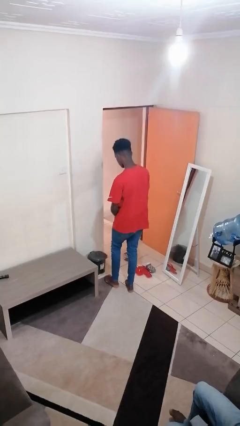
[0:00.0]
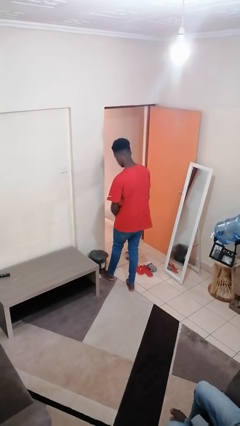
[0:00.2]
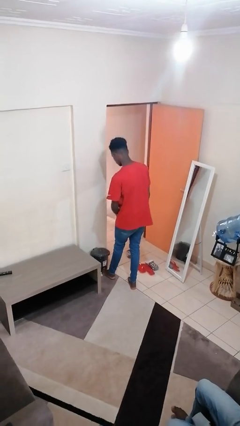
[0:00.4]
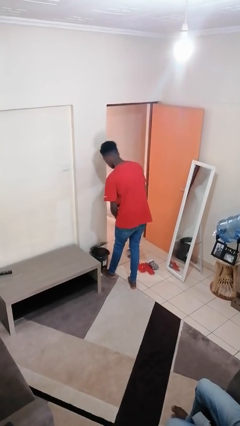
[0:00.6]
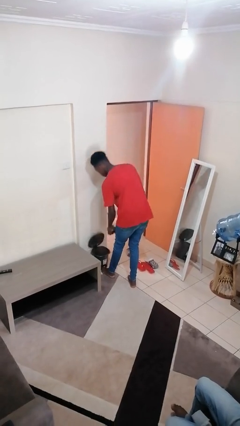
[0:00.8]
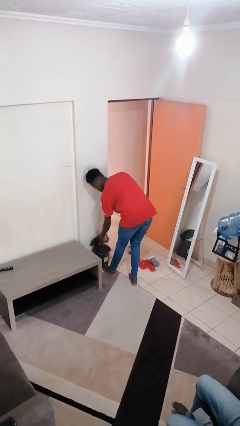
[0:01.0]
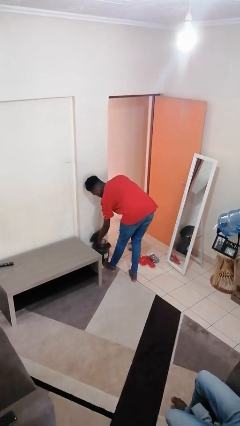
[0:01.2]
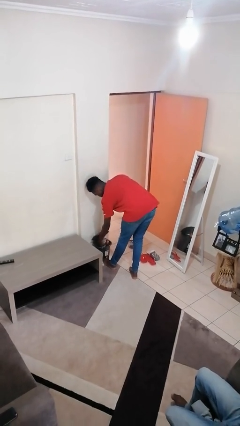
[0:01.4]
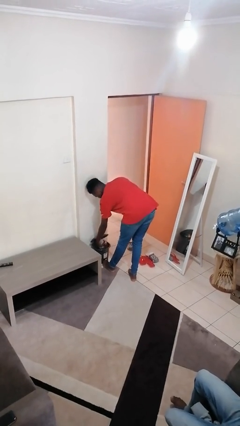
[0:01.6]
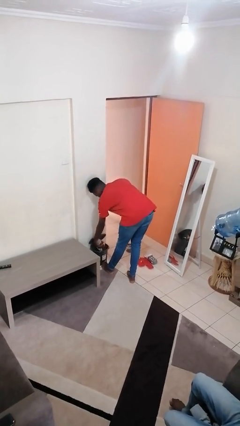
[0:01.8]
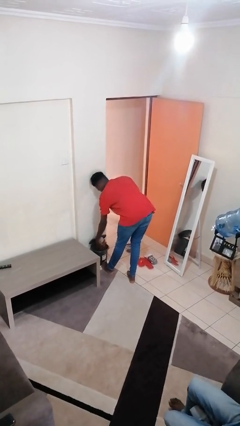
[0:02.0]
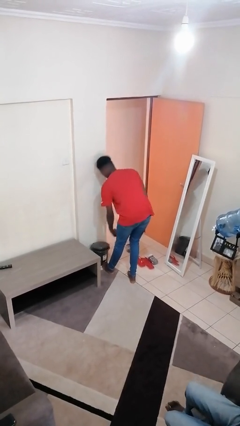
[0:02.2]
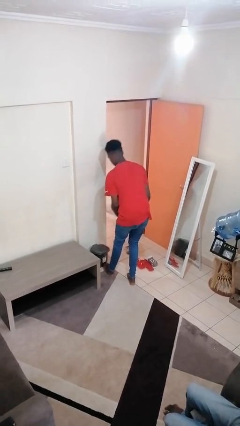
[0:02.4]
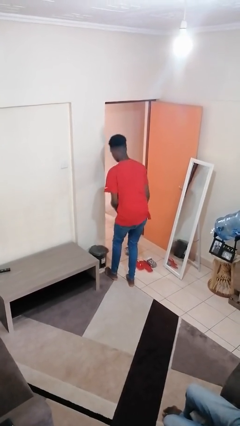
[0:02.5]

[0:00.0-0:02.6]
person discards trash

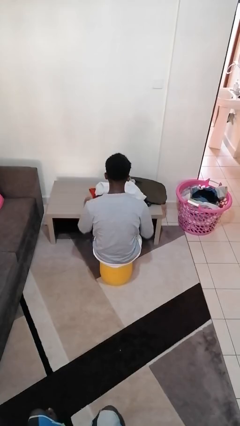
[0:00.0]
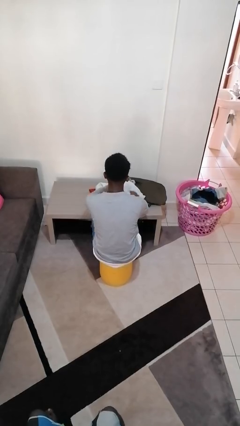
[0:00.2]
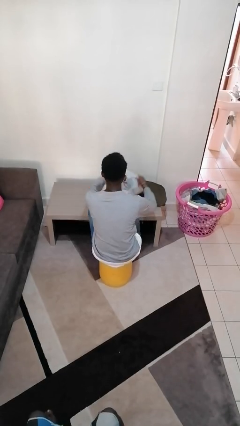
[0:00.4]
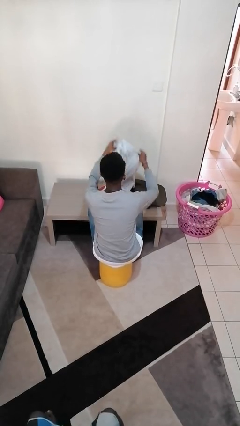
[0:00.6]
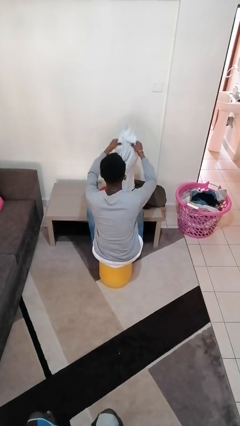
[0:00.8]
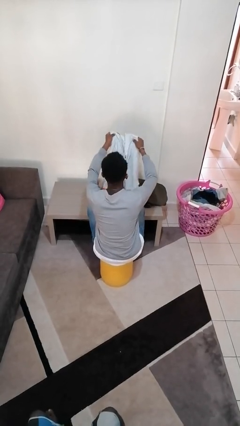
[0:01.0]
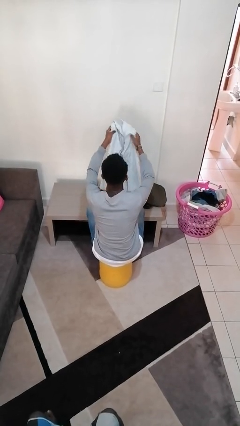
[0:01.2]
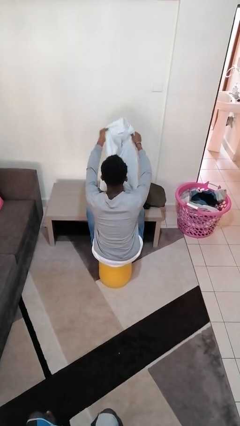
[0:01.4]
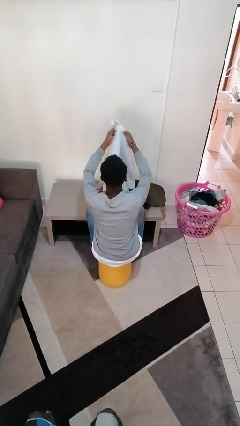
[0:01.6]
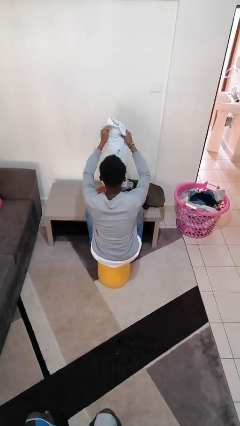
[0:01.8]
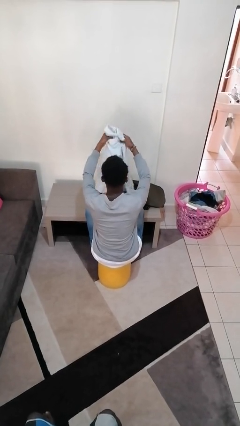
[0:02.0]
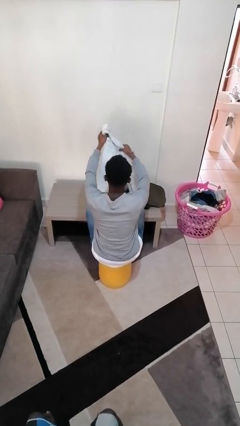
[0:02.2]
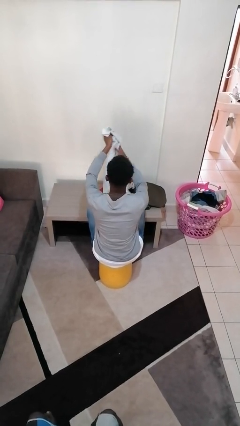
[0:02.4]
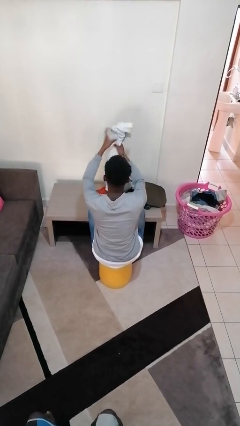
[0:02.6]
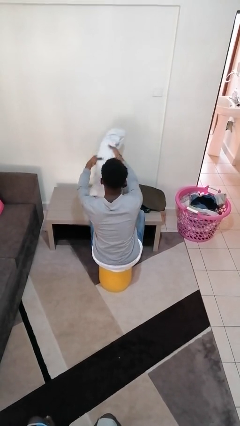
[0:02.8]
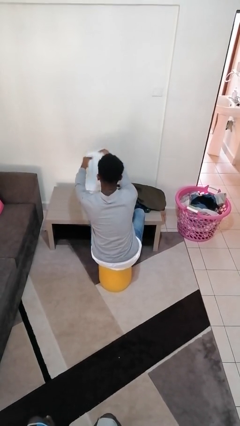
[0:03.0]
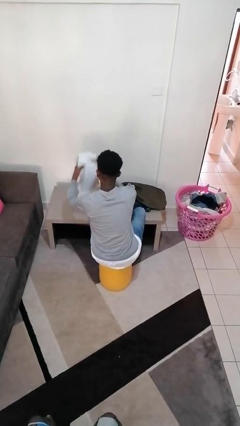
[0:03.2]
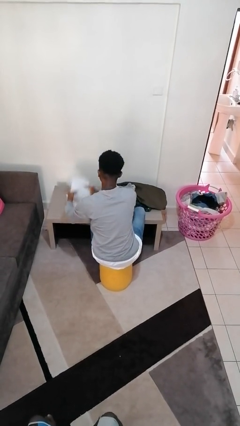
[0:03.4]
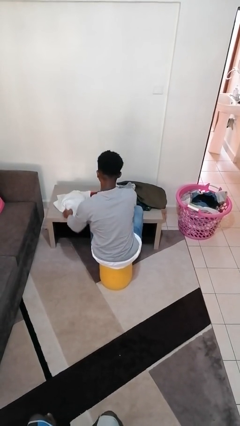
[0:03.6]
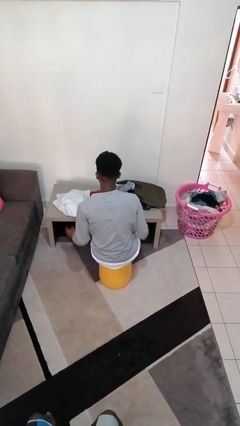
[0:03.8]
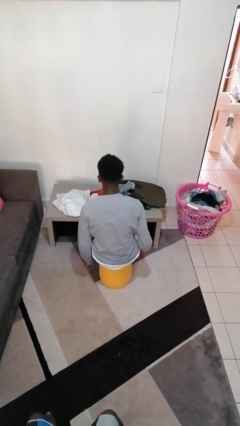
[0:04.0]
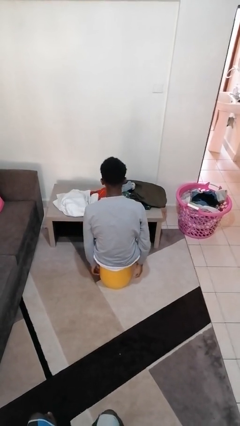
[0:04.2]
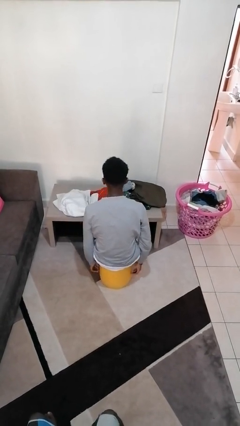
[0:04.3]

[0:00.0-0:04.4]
person folds shirt

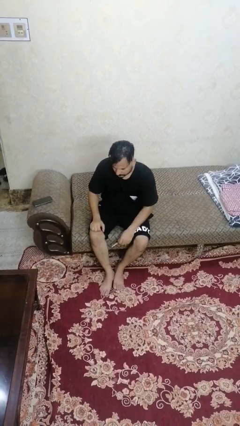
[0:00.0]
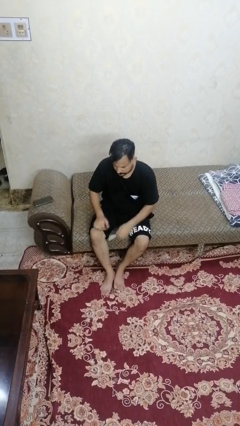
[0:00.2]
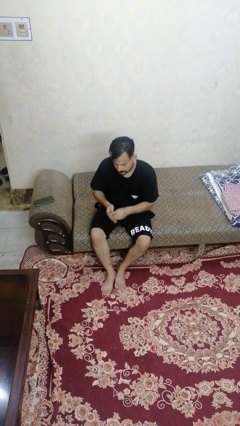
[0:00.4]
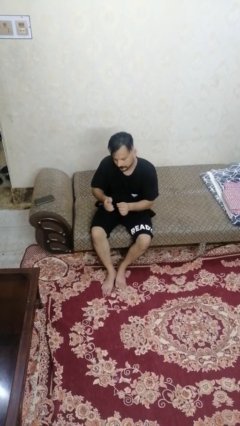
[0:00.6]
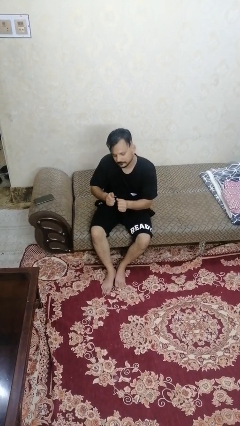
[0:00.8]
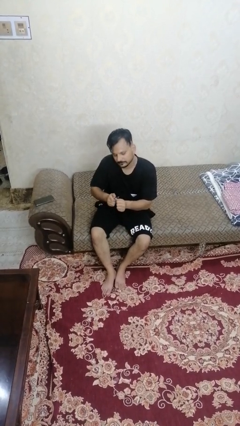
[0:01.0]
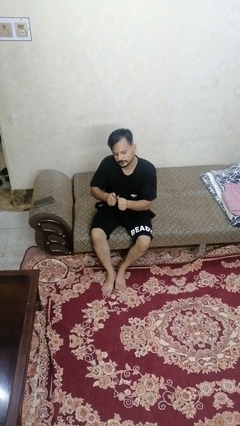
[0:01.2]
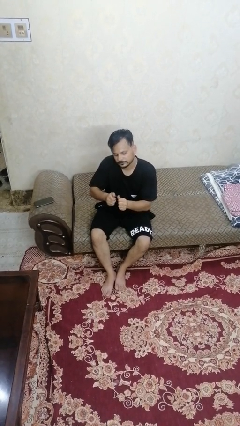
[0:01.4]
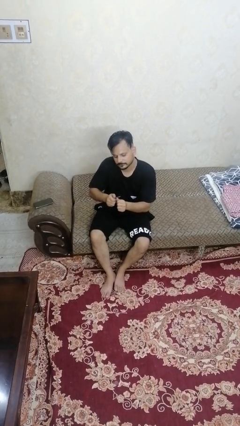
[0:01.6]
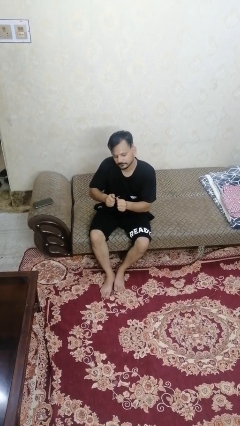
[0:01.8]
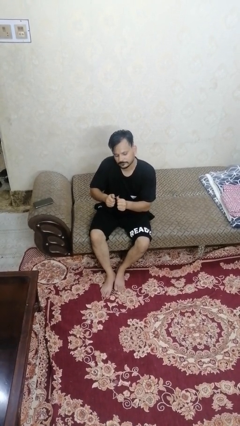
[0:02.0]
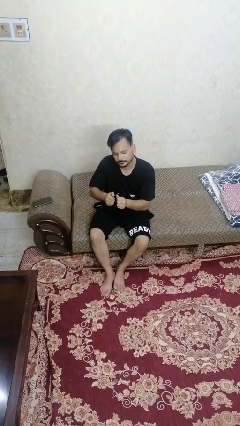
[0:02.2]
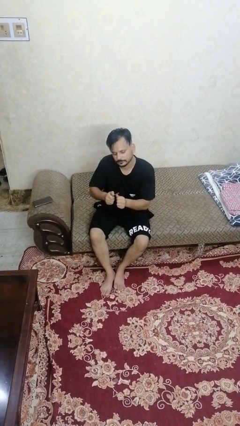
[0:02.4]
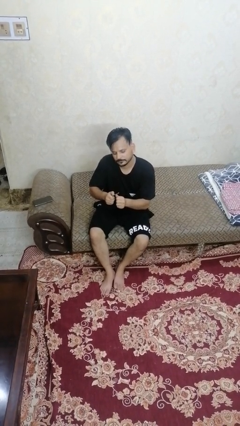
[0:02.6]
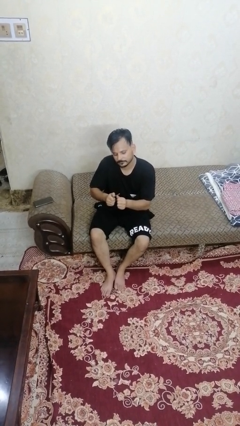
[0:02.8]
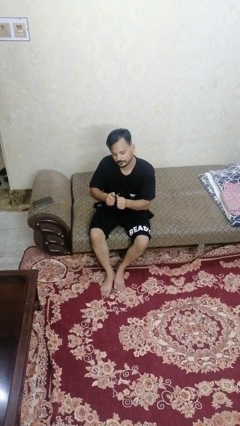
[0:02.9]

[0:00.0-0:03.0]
person files fingernails

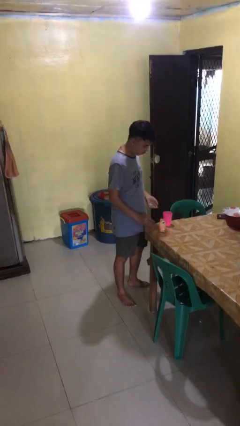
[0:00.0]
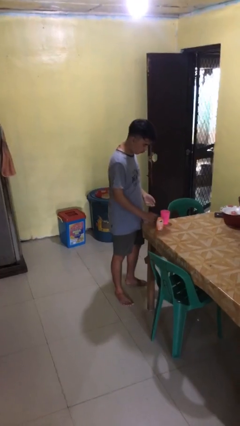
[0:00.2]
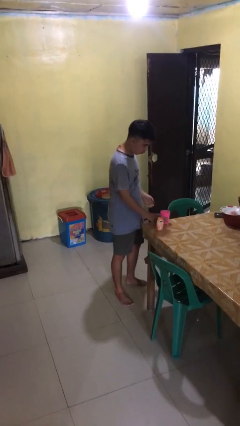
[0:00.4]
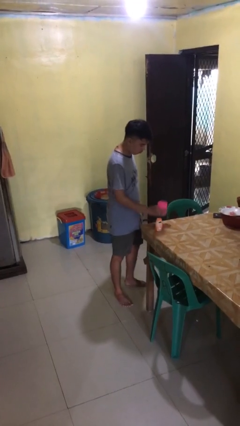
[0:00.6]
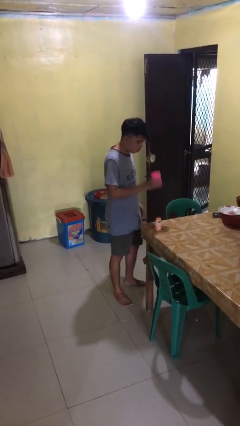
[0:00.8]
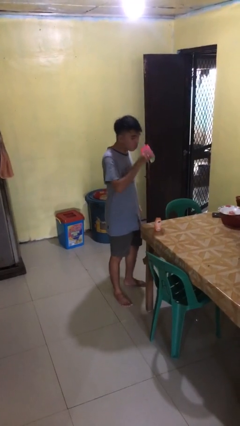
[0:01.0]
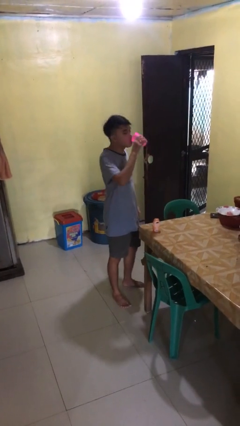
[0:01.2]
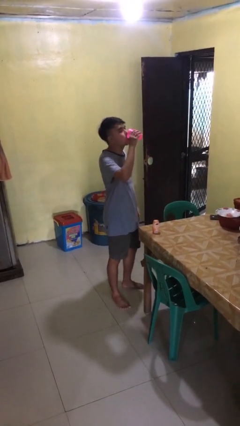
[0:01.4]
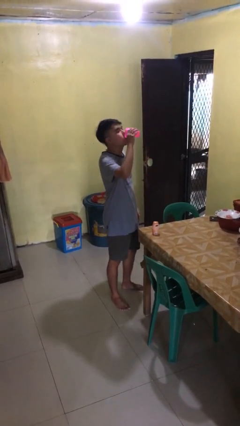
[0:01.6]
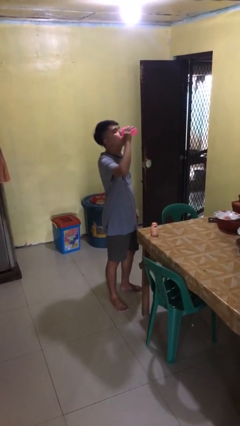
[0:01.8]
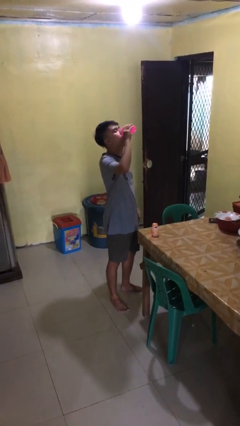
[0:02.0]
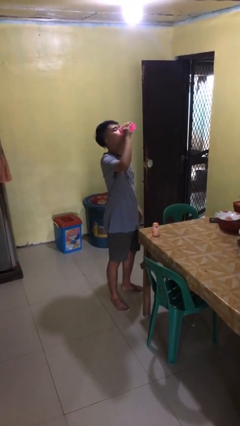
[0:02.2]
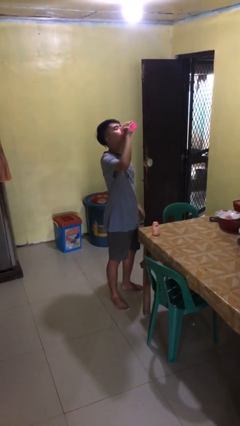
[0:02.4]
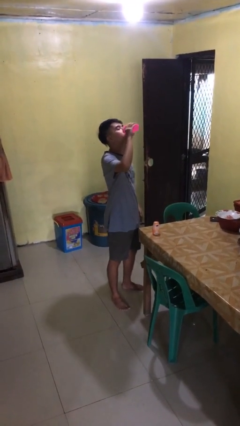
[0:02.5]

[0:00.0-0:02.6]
person drinks from cup

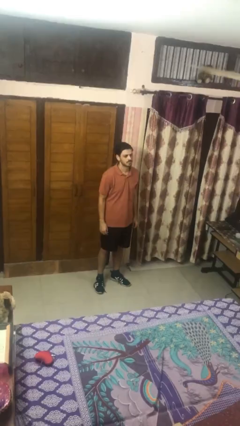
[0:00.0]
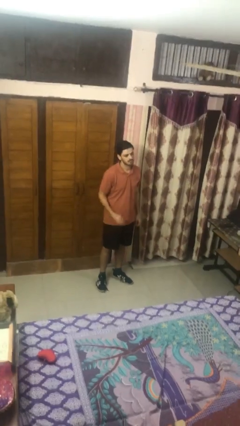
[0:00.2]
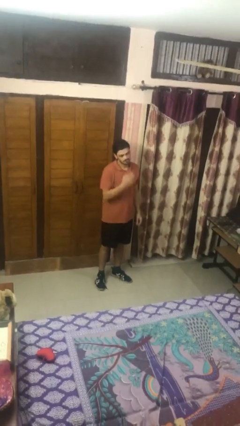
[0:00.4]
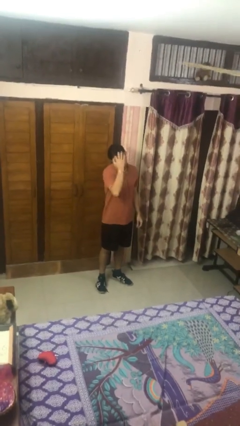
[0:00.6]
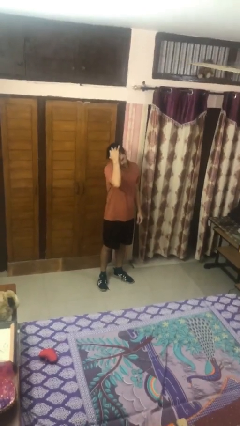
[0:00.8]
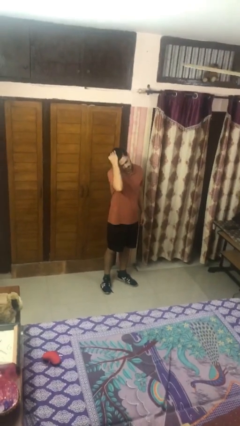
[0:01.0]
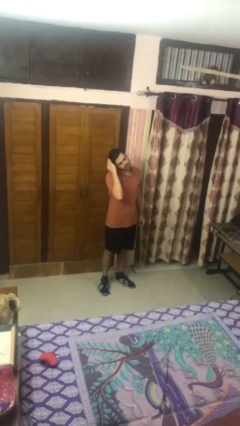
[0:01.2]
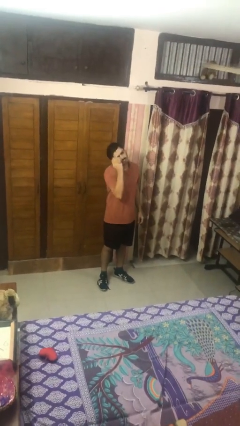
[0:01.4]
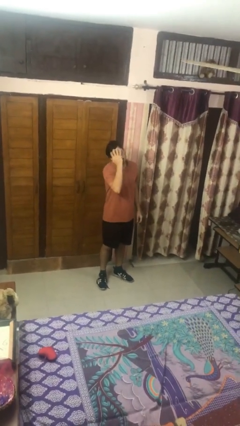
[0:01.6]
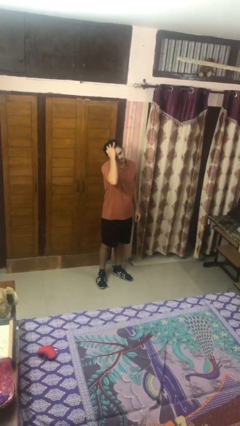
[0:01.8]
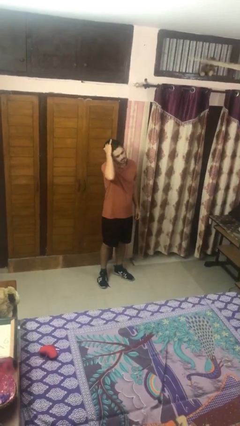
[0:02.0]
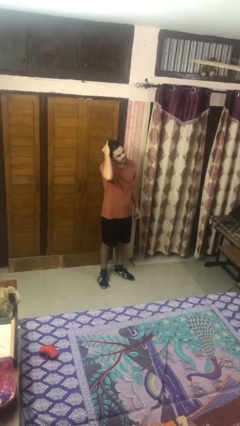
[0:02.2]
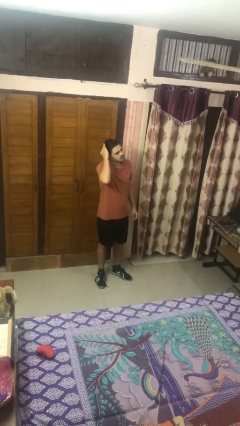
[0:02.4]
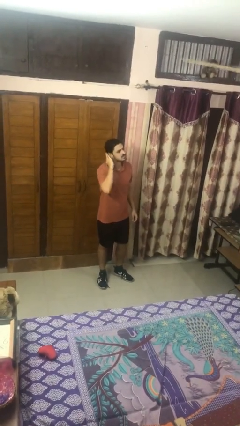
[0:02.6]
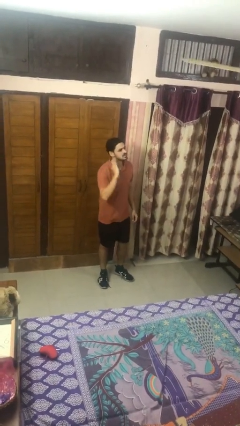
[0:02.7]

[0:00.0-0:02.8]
person strokes hair

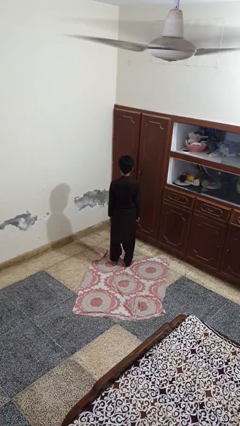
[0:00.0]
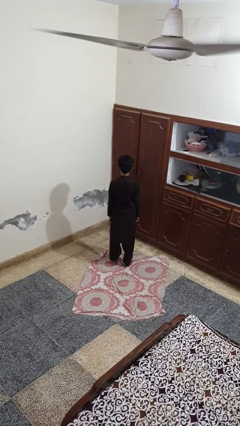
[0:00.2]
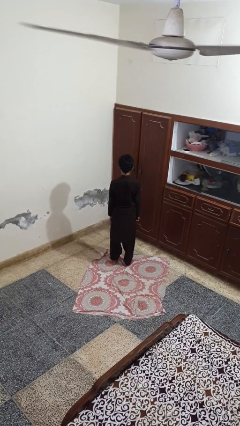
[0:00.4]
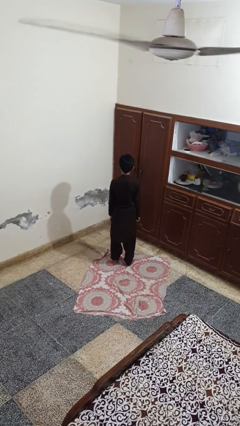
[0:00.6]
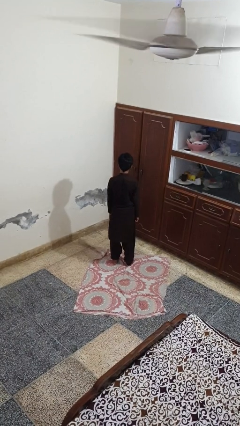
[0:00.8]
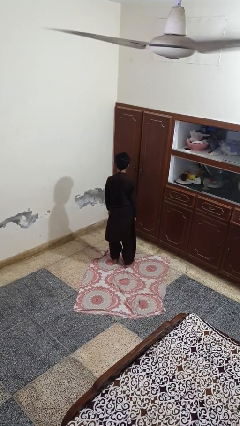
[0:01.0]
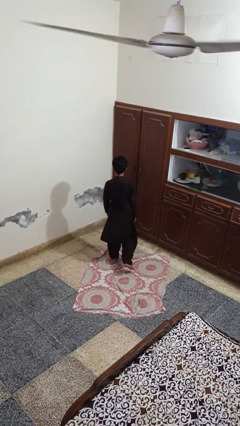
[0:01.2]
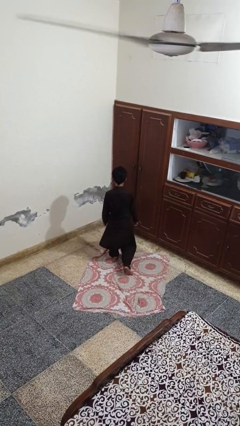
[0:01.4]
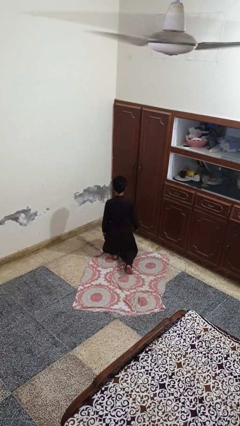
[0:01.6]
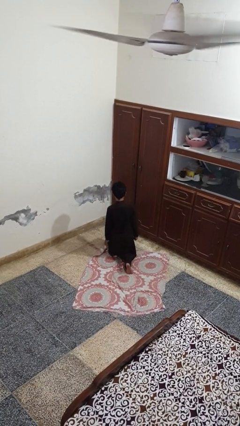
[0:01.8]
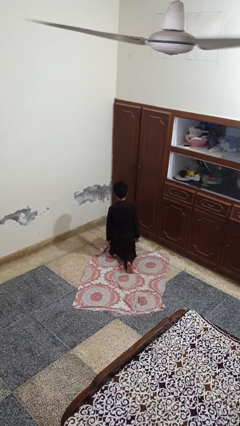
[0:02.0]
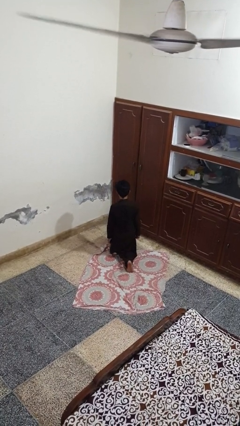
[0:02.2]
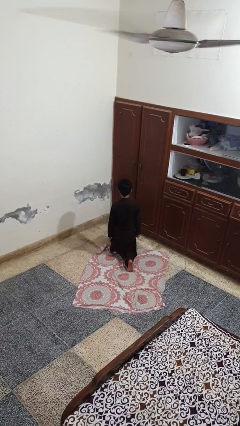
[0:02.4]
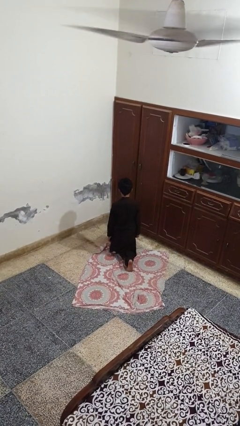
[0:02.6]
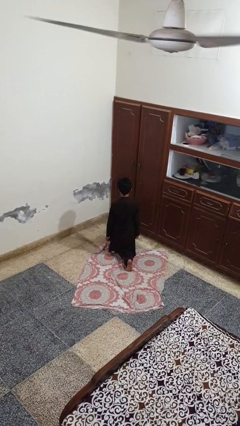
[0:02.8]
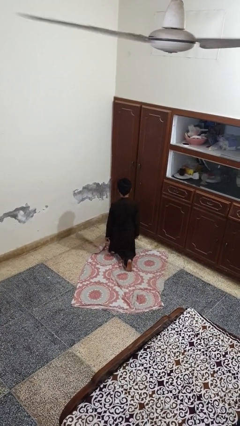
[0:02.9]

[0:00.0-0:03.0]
person kneels
